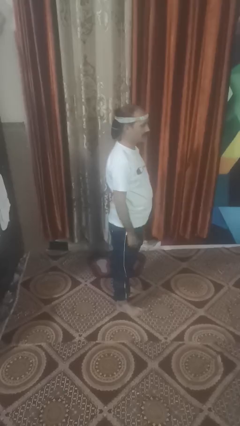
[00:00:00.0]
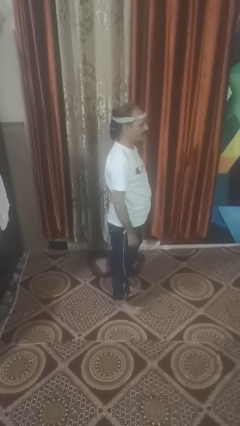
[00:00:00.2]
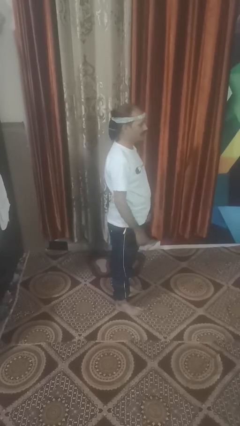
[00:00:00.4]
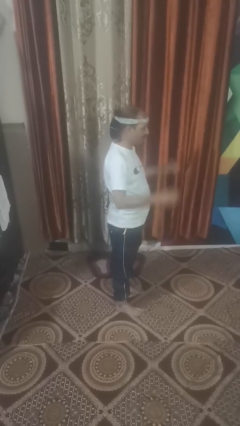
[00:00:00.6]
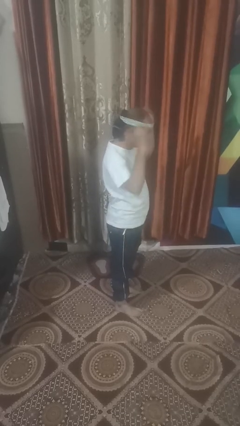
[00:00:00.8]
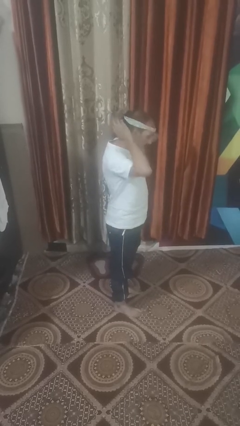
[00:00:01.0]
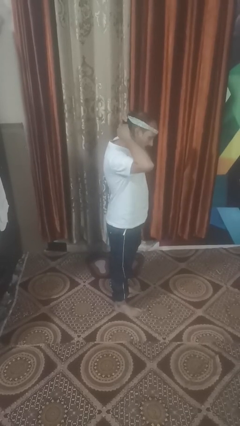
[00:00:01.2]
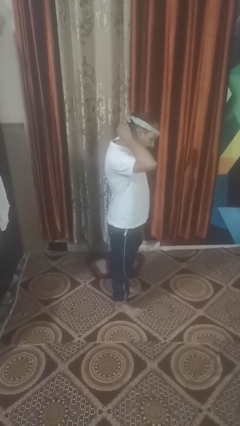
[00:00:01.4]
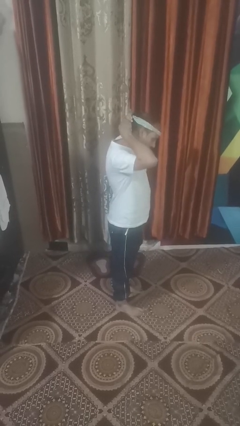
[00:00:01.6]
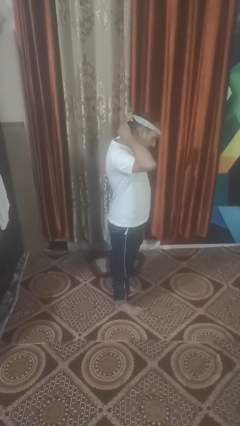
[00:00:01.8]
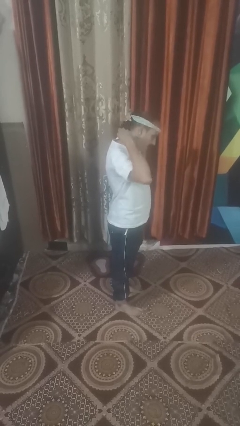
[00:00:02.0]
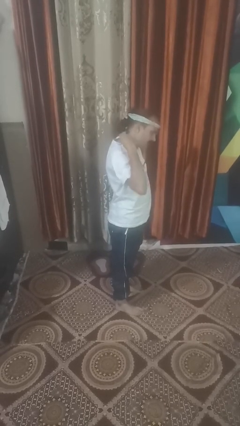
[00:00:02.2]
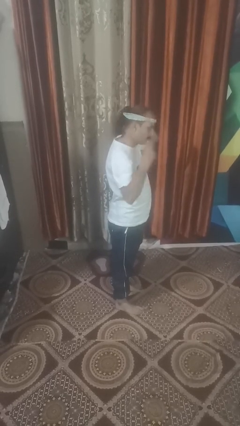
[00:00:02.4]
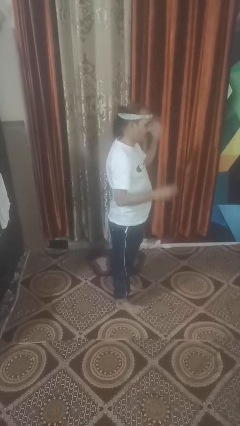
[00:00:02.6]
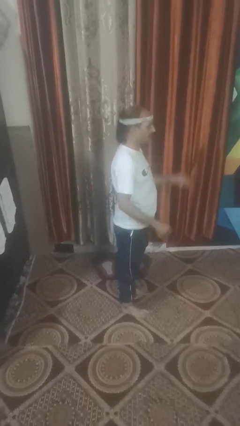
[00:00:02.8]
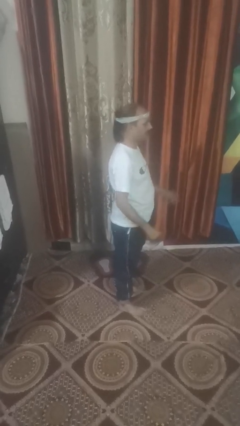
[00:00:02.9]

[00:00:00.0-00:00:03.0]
person takes off hairtie

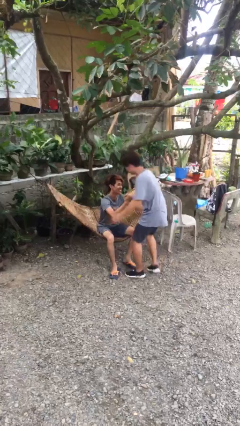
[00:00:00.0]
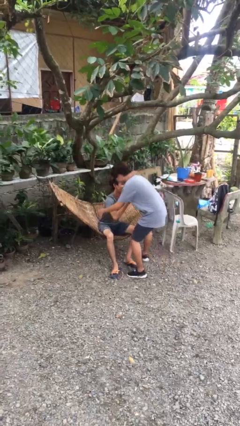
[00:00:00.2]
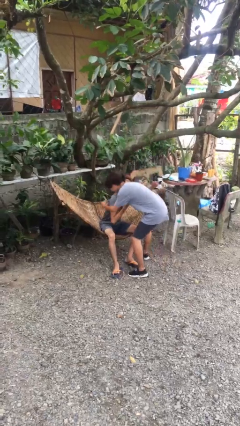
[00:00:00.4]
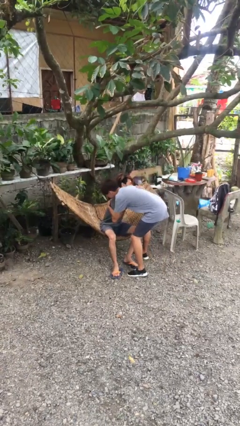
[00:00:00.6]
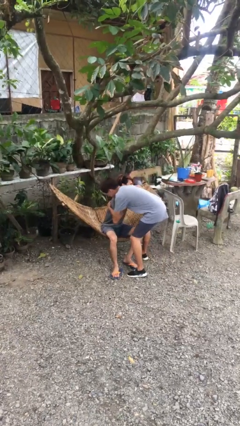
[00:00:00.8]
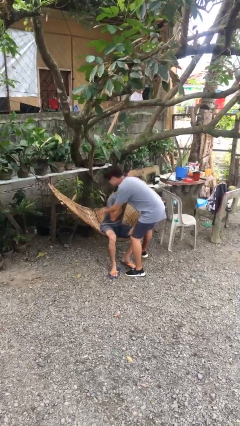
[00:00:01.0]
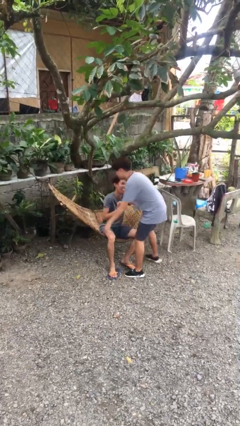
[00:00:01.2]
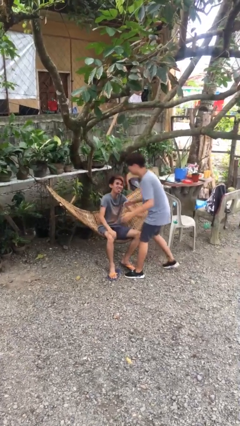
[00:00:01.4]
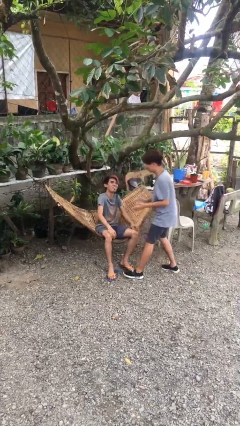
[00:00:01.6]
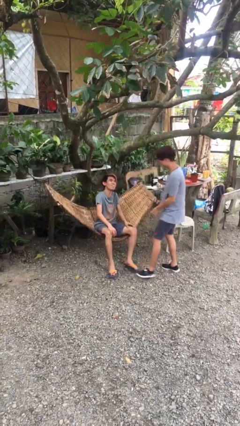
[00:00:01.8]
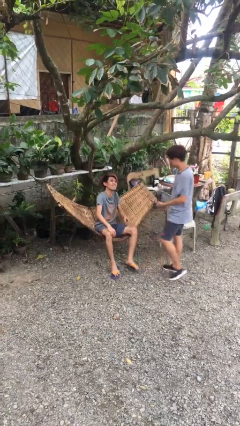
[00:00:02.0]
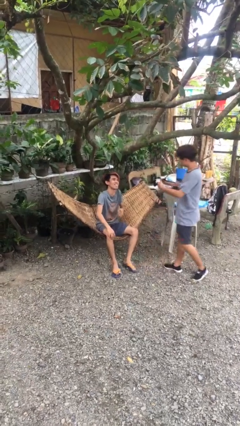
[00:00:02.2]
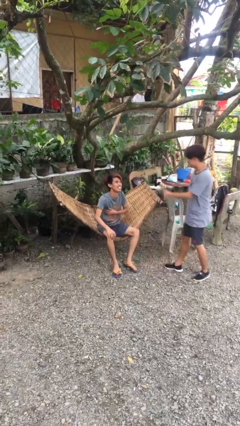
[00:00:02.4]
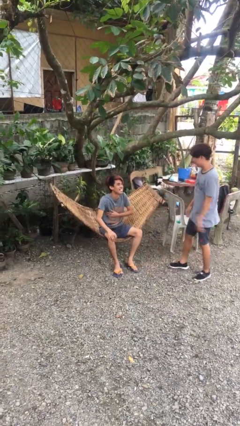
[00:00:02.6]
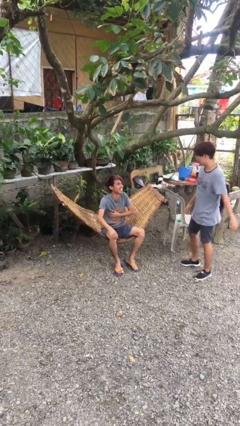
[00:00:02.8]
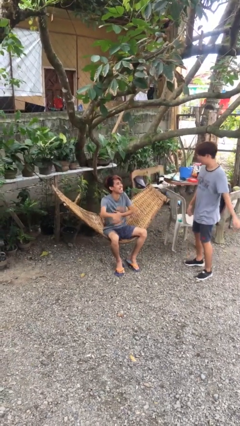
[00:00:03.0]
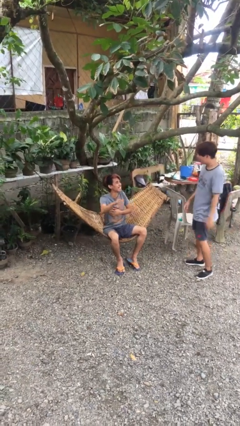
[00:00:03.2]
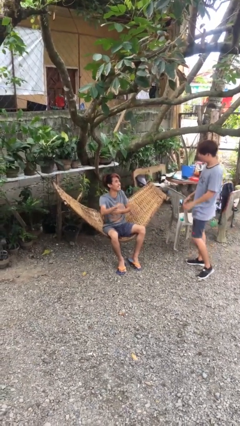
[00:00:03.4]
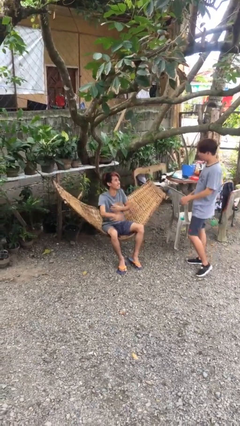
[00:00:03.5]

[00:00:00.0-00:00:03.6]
person embraces person

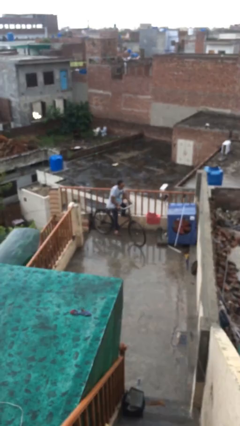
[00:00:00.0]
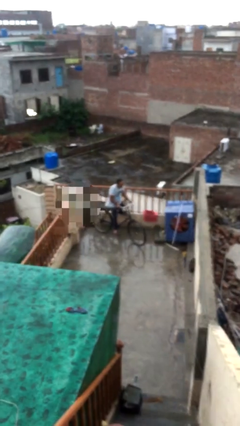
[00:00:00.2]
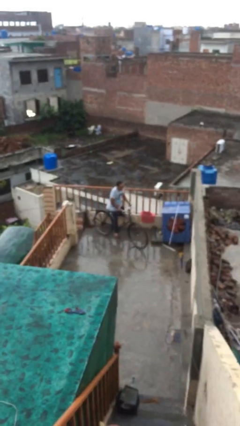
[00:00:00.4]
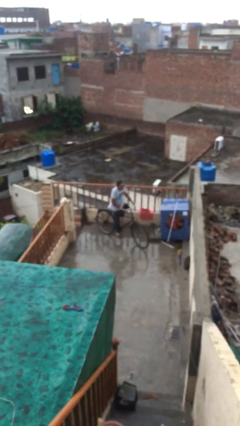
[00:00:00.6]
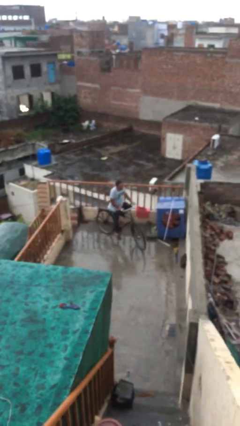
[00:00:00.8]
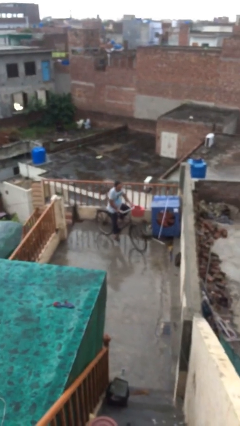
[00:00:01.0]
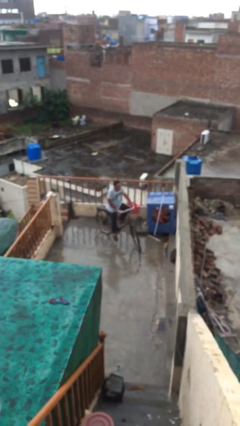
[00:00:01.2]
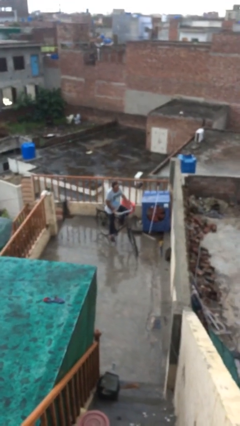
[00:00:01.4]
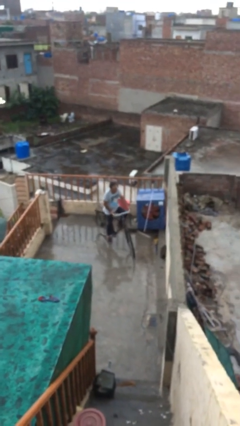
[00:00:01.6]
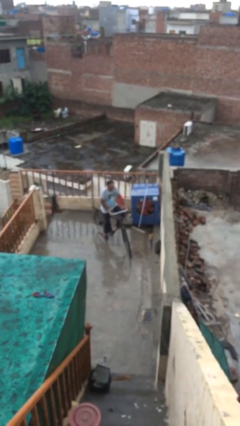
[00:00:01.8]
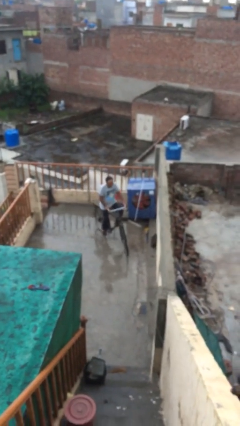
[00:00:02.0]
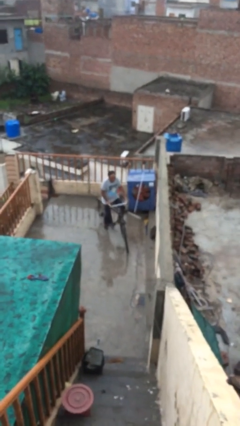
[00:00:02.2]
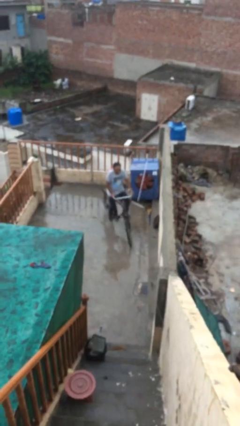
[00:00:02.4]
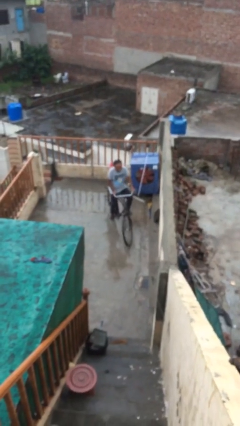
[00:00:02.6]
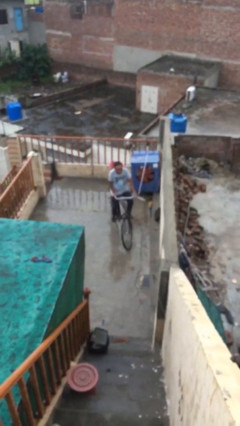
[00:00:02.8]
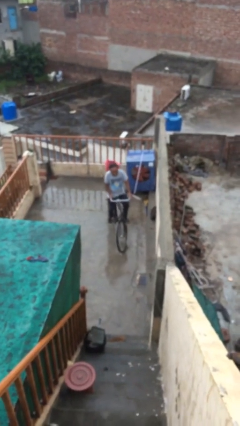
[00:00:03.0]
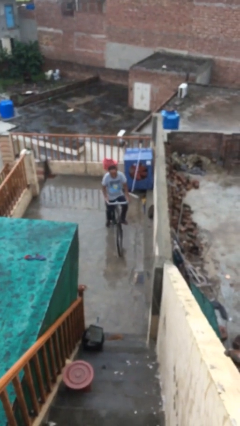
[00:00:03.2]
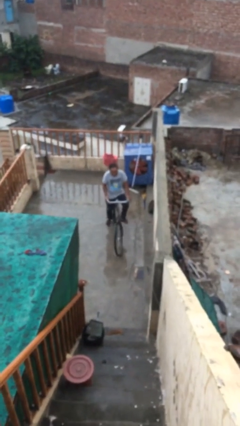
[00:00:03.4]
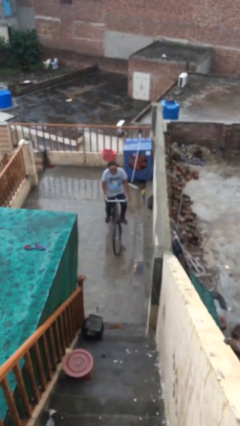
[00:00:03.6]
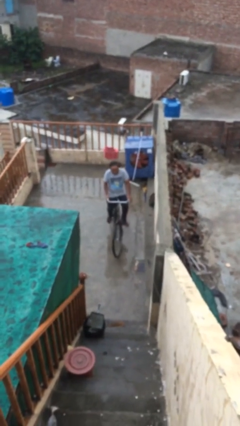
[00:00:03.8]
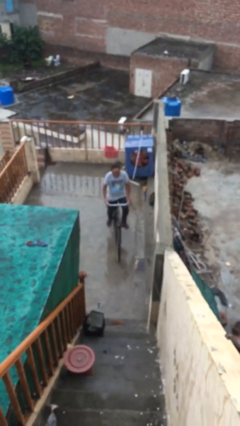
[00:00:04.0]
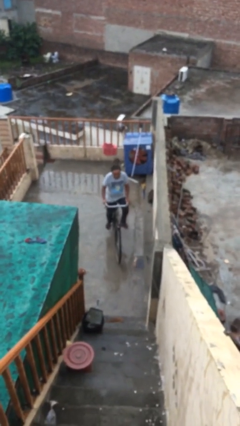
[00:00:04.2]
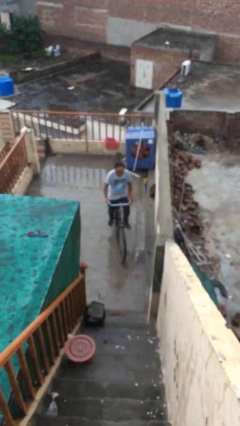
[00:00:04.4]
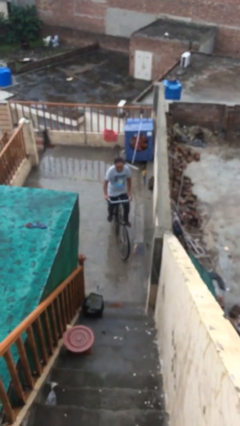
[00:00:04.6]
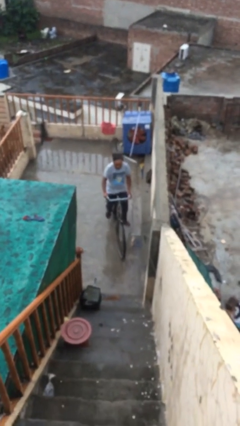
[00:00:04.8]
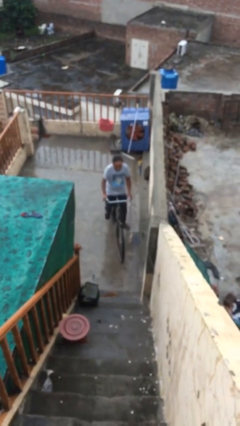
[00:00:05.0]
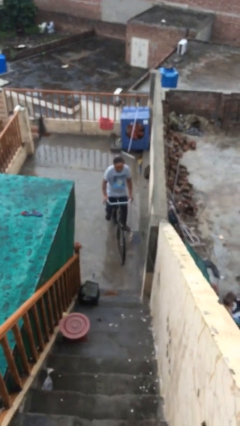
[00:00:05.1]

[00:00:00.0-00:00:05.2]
person rides bicycle

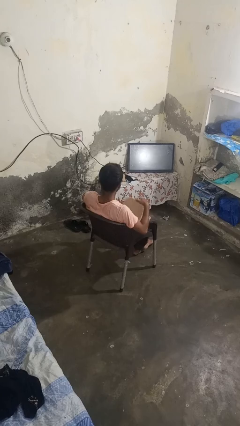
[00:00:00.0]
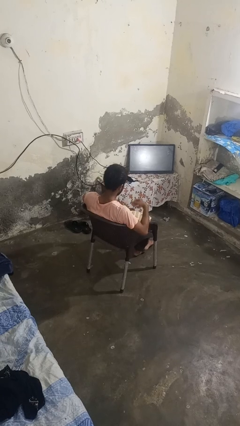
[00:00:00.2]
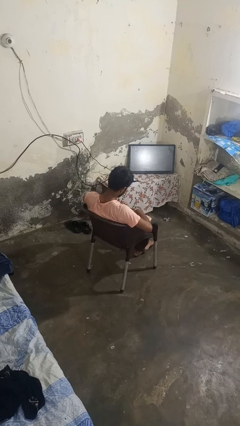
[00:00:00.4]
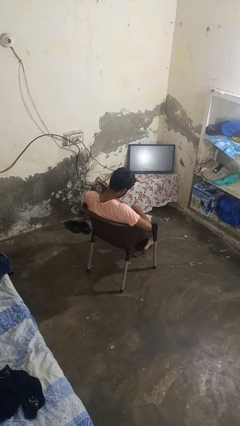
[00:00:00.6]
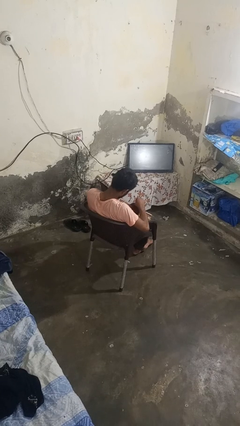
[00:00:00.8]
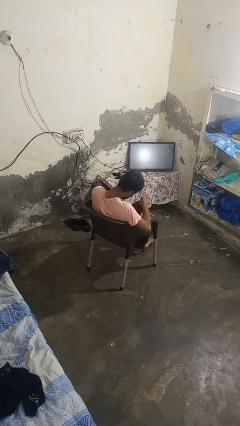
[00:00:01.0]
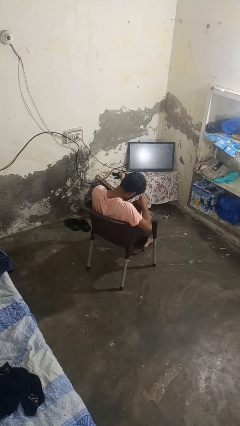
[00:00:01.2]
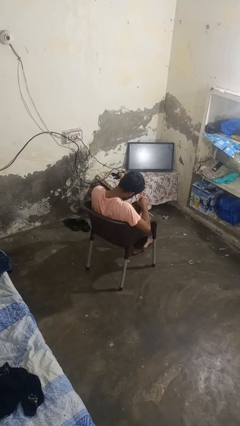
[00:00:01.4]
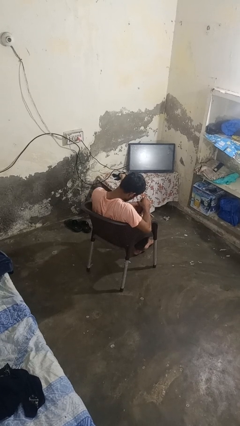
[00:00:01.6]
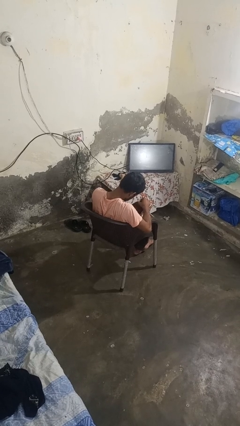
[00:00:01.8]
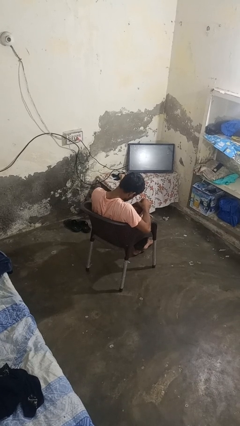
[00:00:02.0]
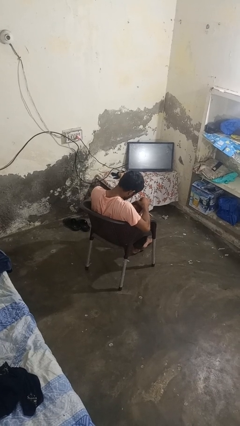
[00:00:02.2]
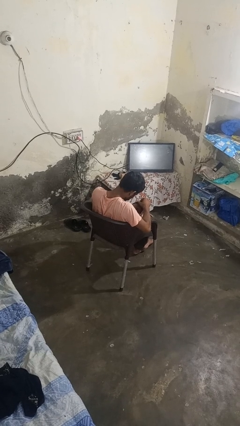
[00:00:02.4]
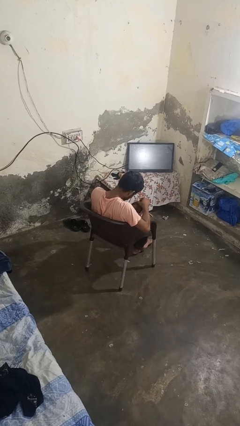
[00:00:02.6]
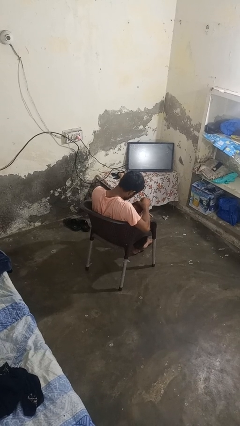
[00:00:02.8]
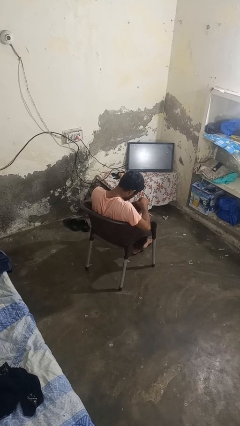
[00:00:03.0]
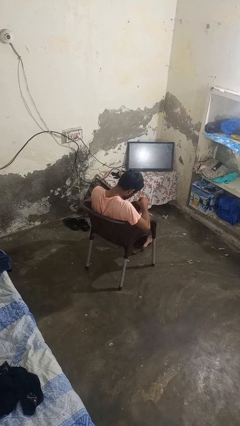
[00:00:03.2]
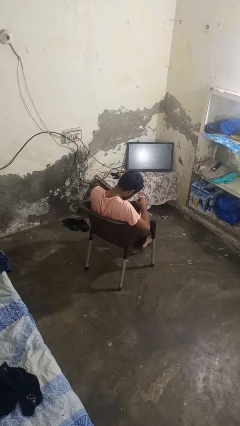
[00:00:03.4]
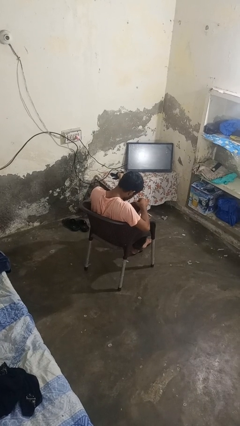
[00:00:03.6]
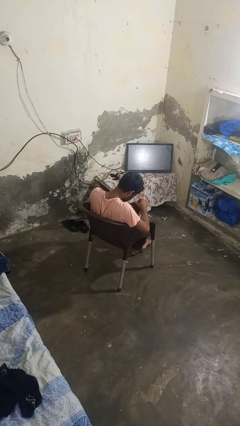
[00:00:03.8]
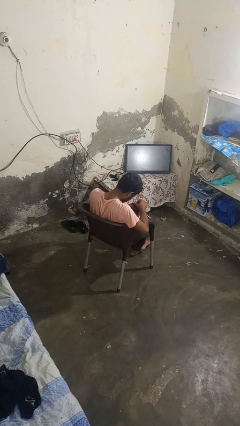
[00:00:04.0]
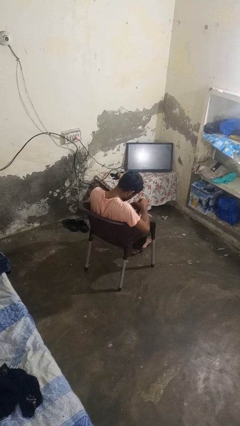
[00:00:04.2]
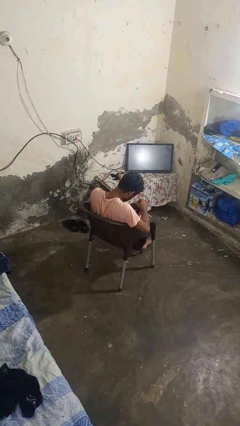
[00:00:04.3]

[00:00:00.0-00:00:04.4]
person searches in purse

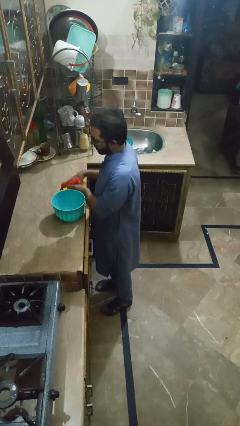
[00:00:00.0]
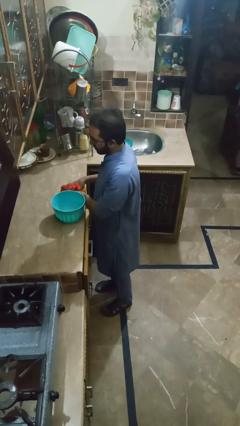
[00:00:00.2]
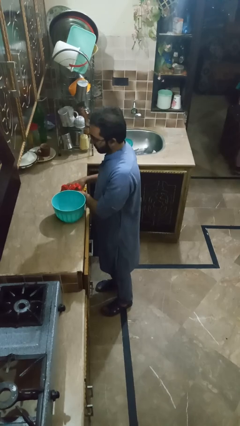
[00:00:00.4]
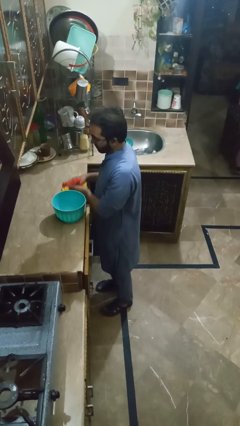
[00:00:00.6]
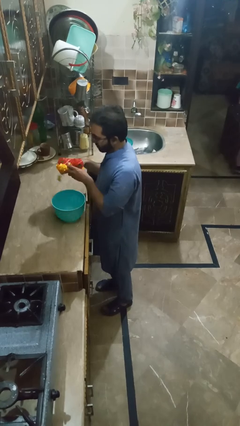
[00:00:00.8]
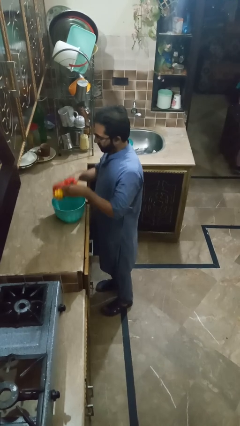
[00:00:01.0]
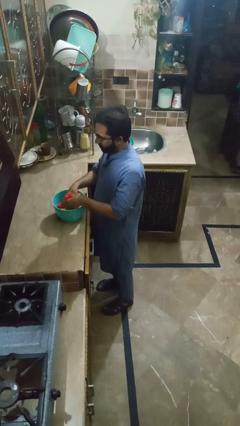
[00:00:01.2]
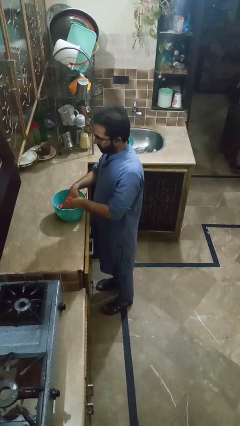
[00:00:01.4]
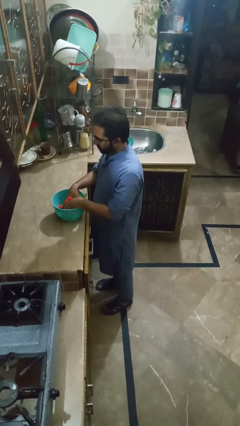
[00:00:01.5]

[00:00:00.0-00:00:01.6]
person pours into bowl
